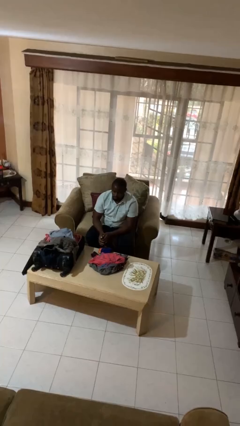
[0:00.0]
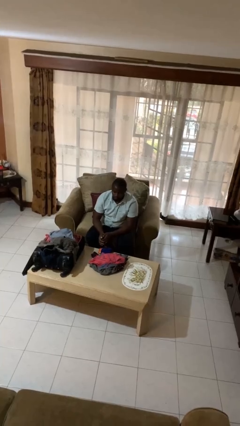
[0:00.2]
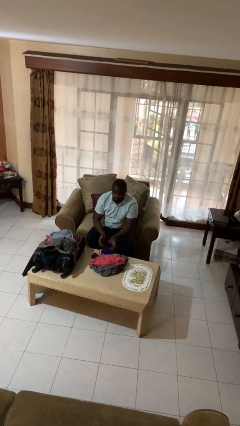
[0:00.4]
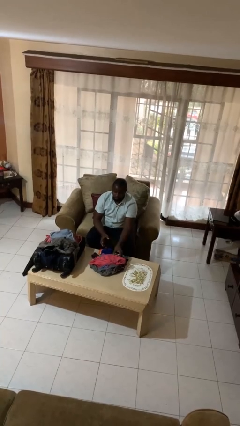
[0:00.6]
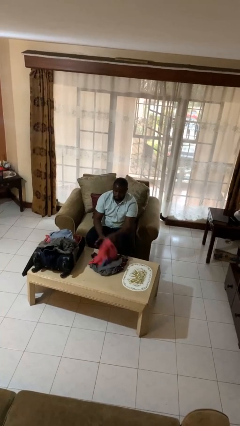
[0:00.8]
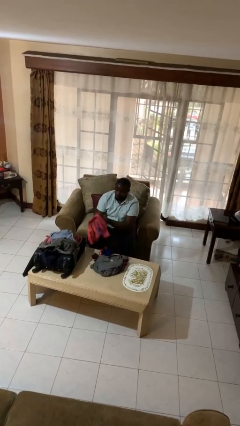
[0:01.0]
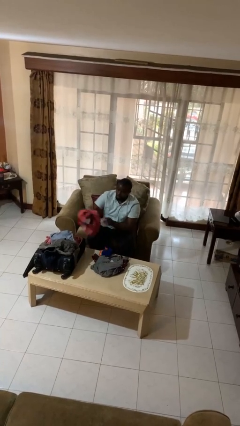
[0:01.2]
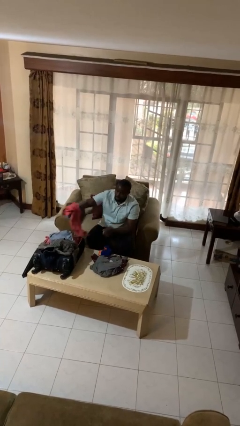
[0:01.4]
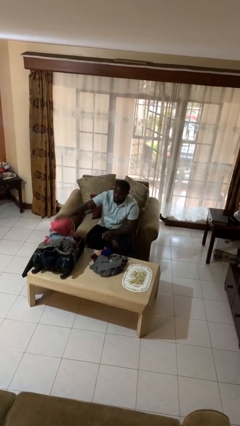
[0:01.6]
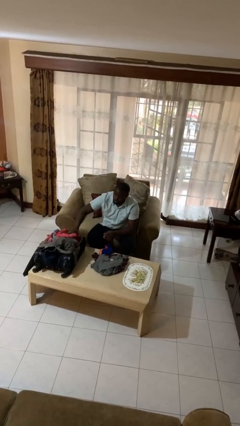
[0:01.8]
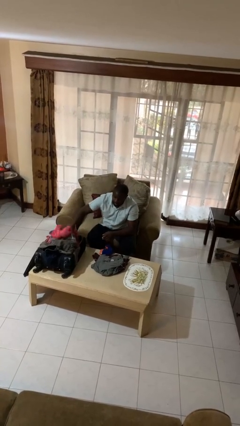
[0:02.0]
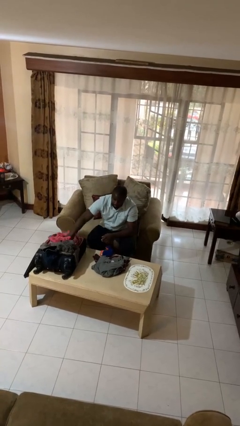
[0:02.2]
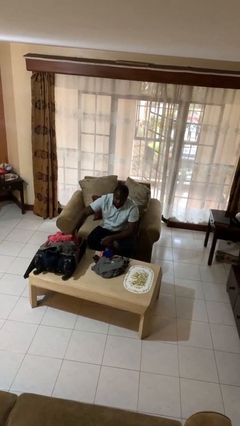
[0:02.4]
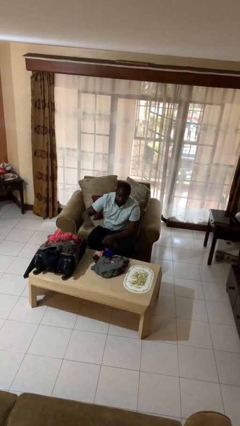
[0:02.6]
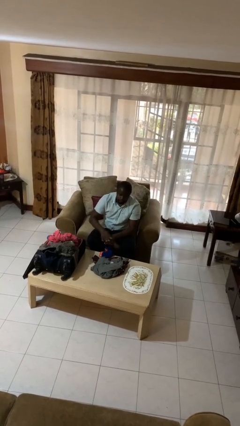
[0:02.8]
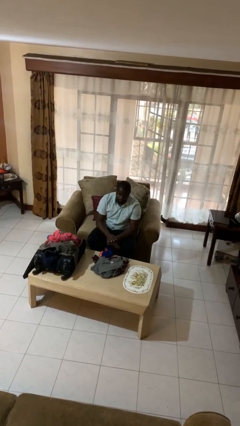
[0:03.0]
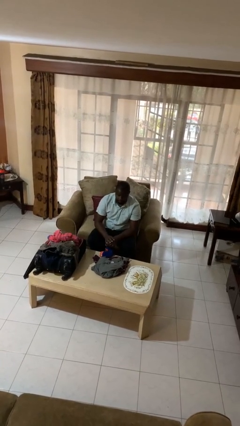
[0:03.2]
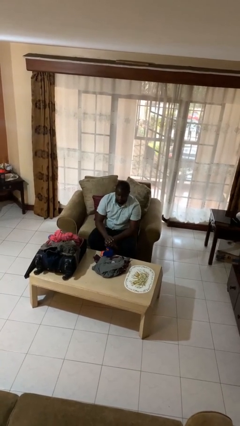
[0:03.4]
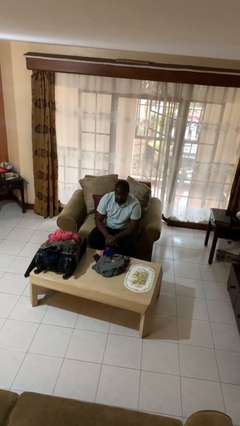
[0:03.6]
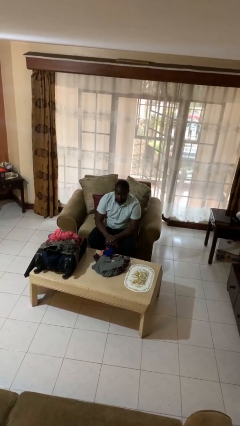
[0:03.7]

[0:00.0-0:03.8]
person loads clothes into suitcase

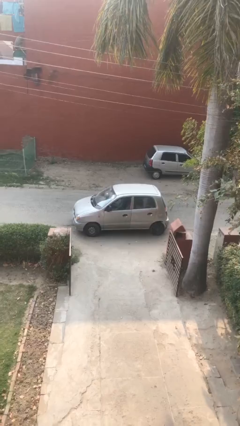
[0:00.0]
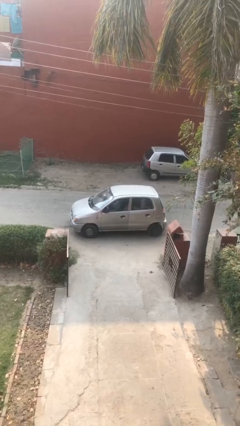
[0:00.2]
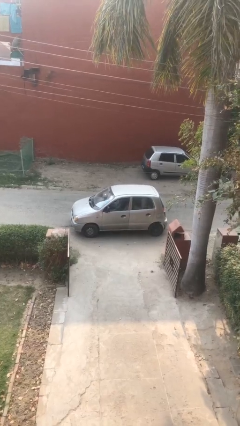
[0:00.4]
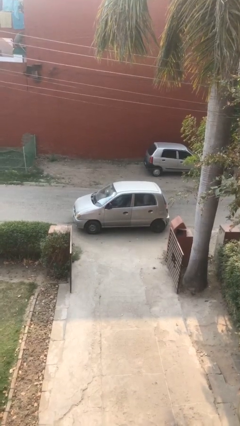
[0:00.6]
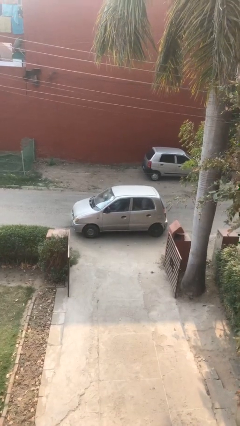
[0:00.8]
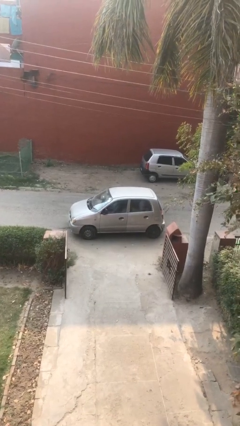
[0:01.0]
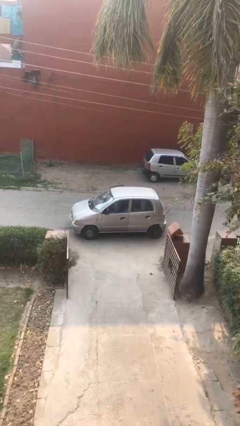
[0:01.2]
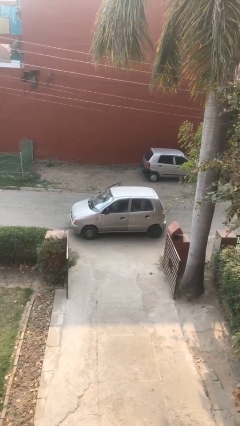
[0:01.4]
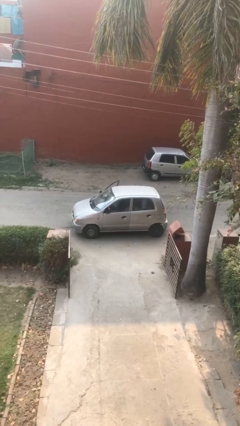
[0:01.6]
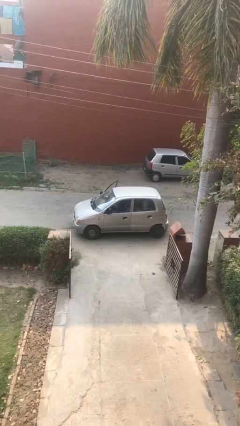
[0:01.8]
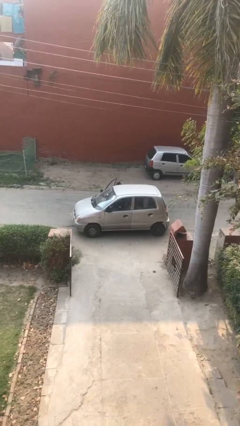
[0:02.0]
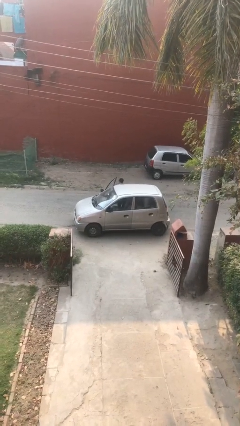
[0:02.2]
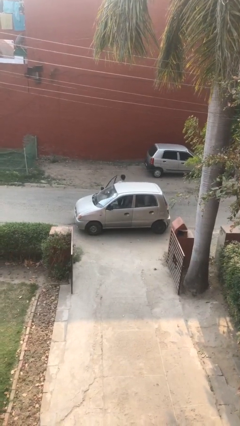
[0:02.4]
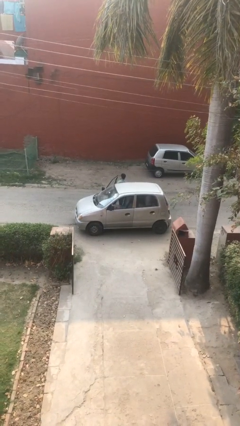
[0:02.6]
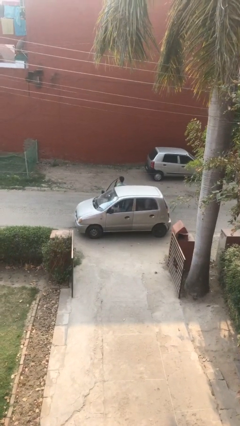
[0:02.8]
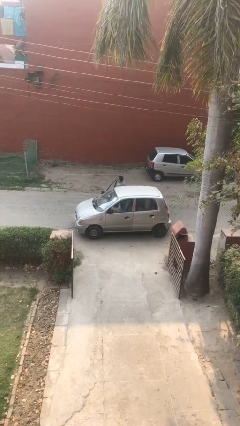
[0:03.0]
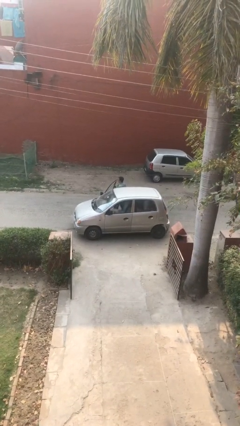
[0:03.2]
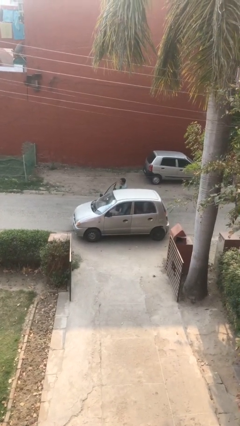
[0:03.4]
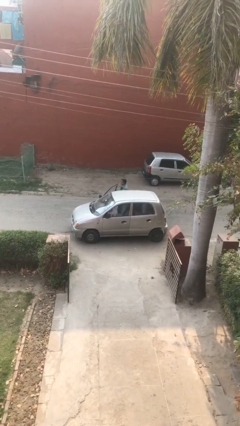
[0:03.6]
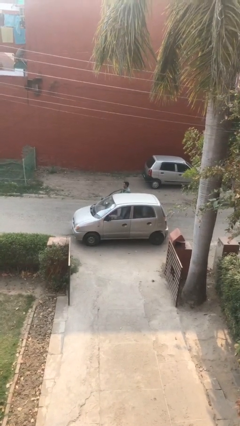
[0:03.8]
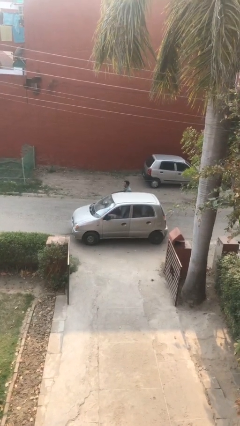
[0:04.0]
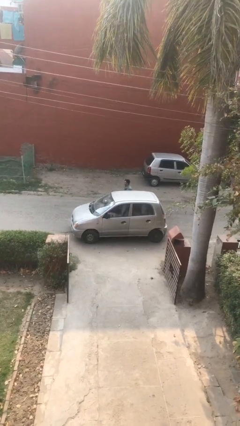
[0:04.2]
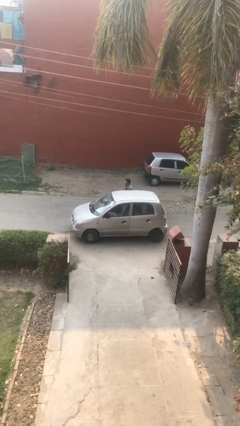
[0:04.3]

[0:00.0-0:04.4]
car drops off person

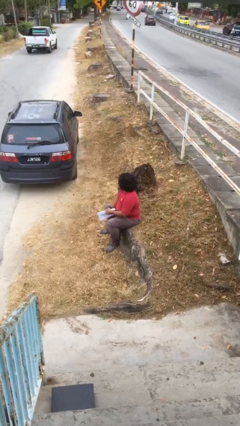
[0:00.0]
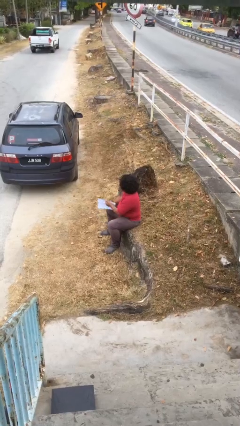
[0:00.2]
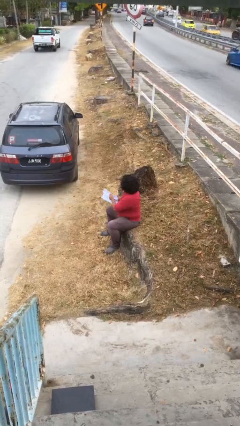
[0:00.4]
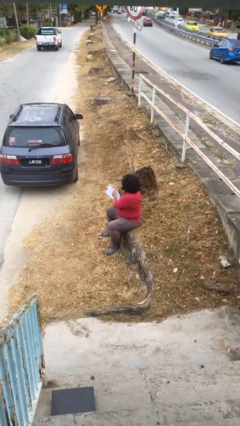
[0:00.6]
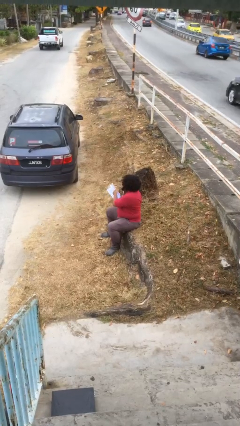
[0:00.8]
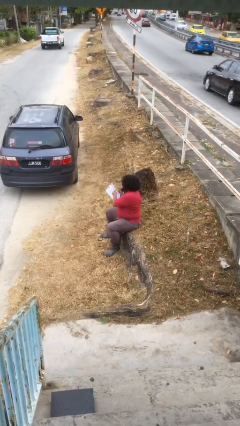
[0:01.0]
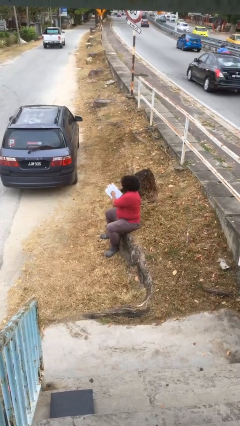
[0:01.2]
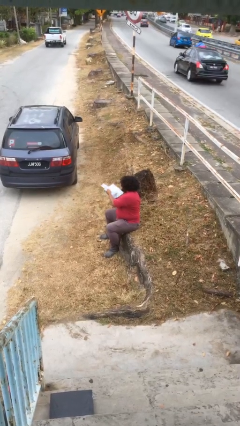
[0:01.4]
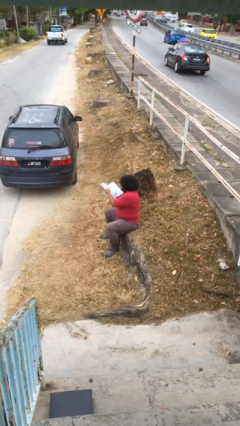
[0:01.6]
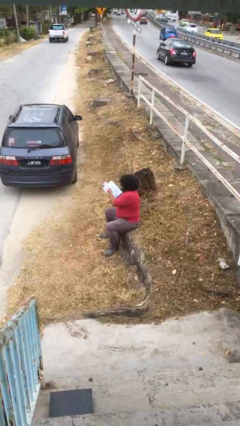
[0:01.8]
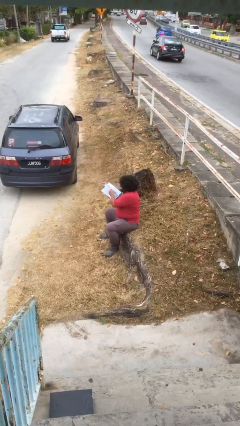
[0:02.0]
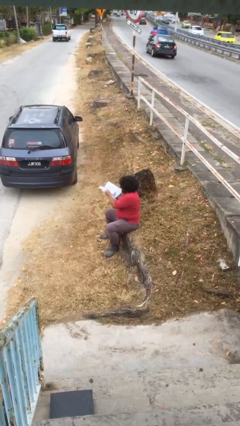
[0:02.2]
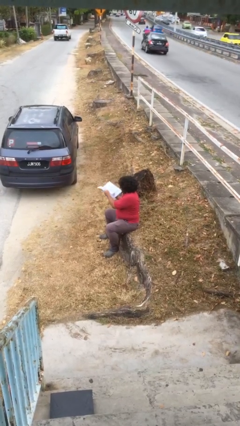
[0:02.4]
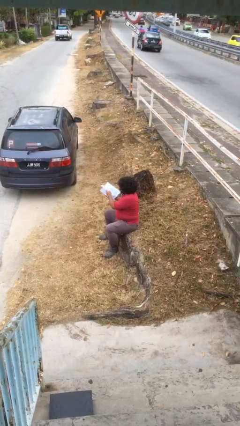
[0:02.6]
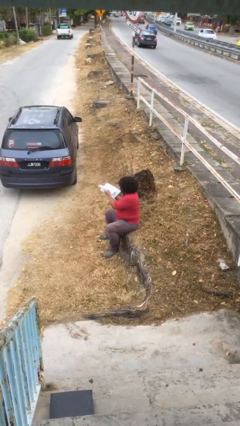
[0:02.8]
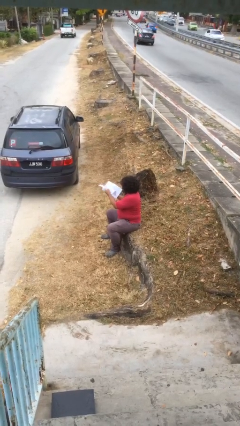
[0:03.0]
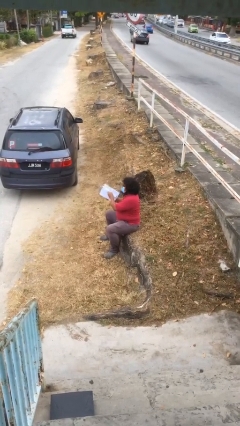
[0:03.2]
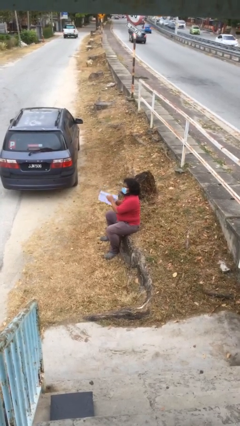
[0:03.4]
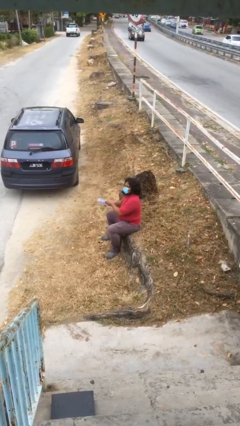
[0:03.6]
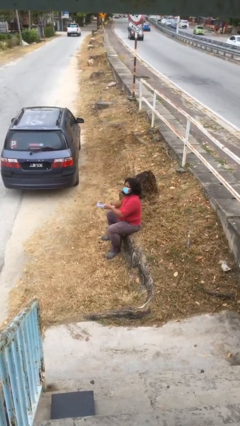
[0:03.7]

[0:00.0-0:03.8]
person reads document

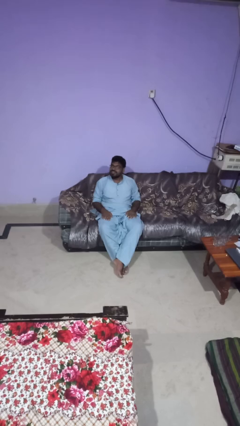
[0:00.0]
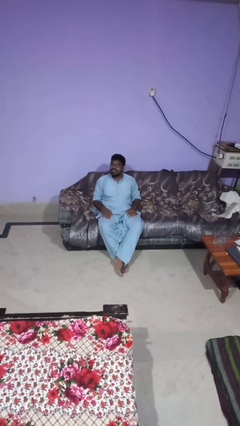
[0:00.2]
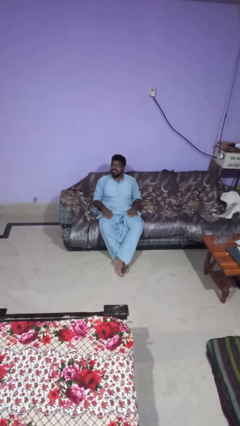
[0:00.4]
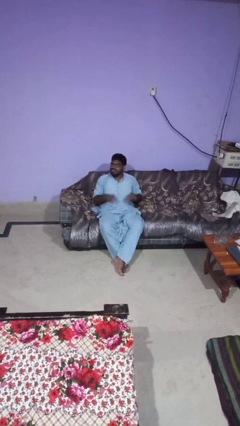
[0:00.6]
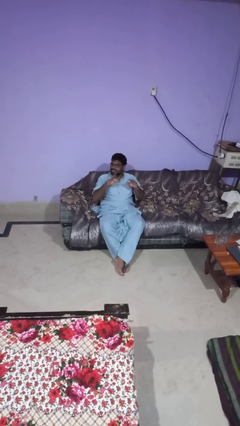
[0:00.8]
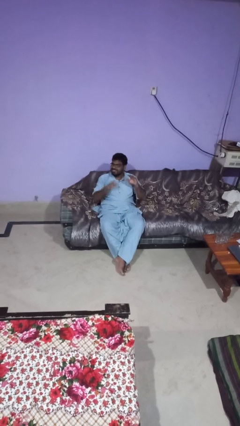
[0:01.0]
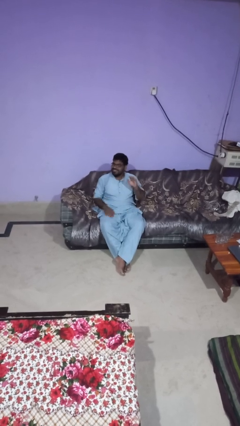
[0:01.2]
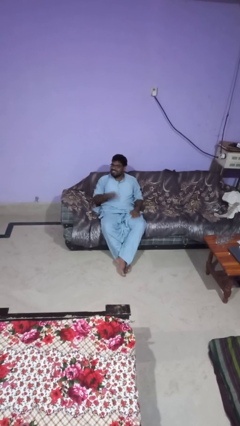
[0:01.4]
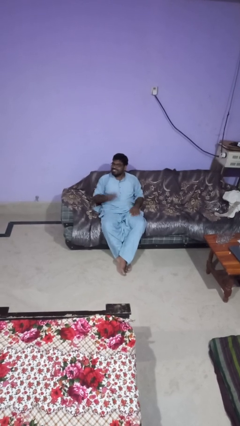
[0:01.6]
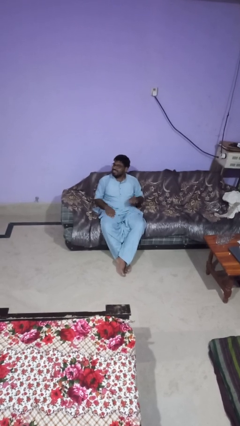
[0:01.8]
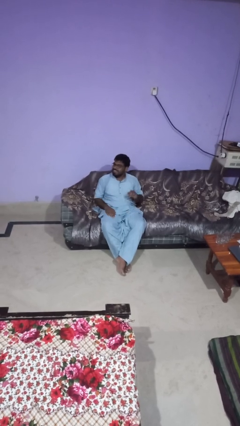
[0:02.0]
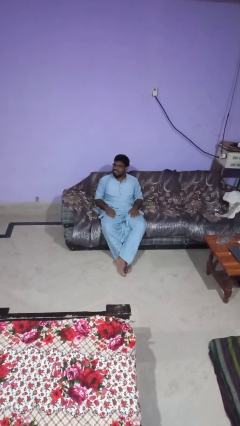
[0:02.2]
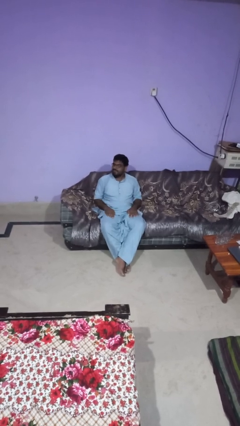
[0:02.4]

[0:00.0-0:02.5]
person slaps hands on thighs

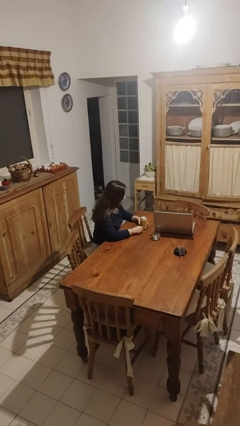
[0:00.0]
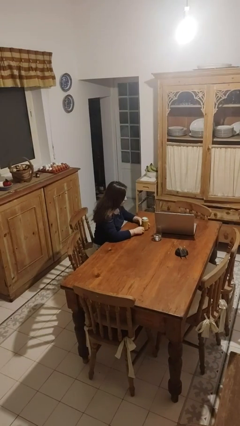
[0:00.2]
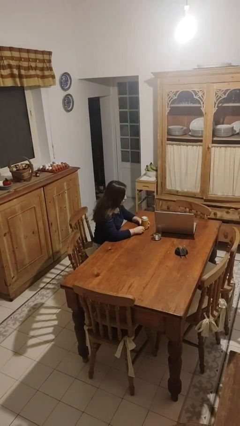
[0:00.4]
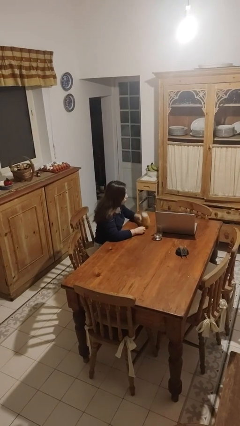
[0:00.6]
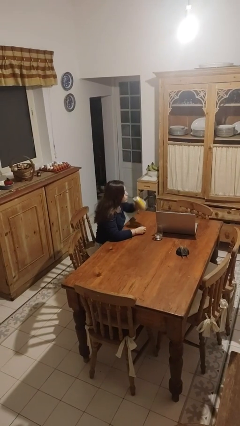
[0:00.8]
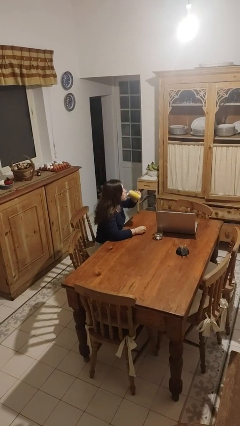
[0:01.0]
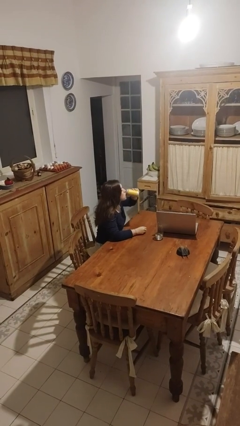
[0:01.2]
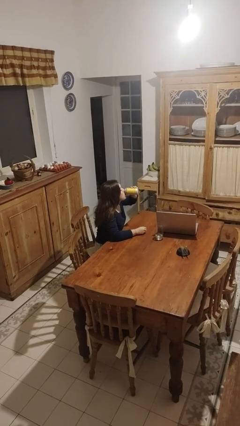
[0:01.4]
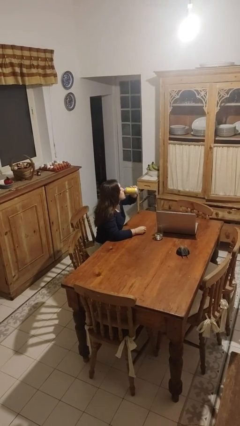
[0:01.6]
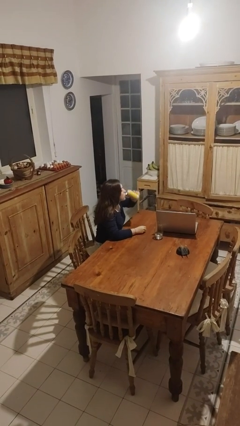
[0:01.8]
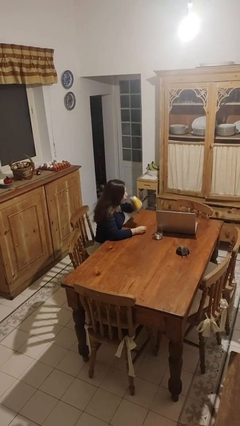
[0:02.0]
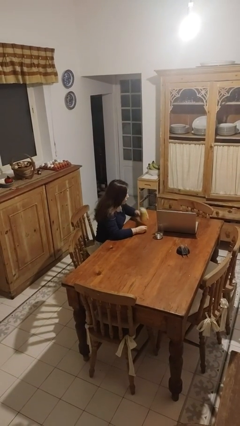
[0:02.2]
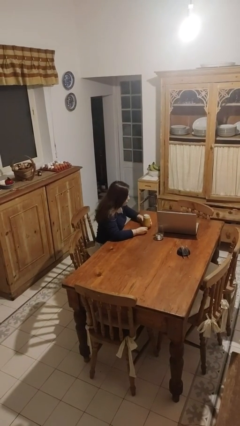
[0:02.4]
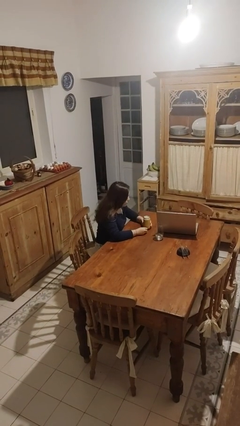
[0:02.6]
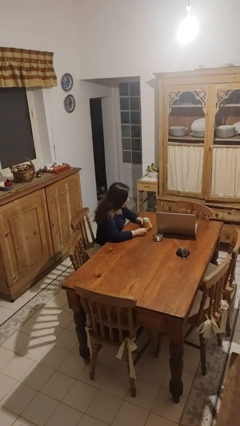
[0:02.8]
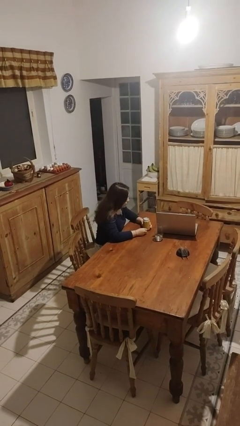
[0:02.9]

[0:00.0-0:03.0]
person drinks from beverage can
